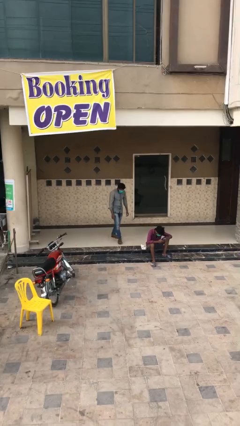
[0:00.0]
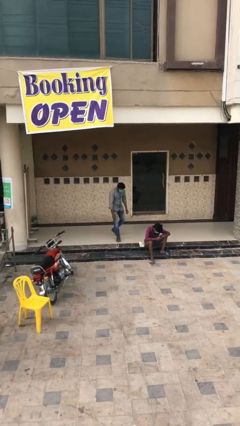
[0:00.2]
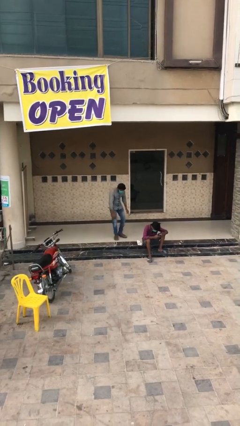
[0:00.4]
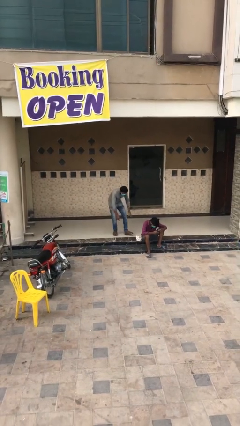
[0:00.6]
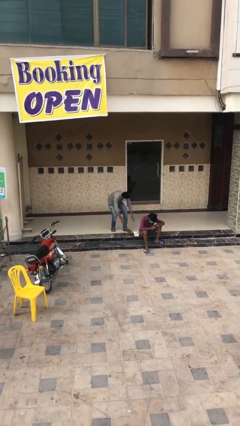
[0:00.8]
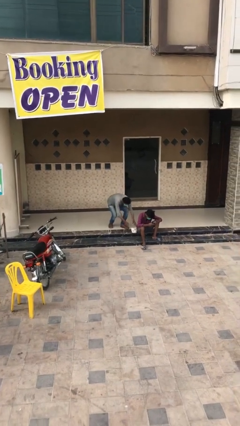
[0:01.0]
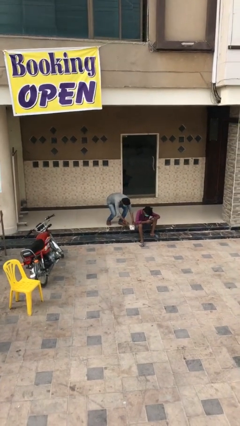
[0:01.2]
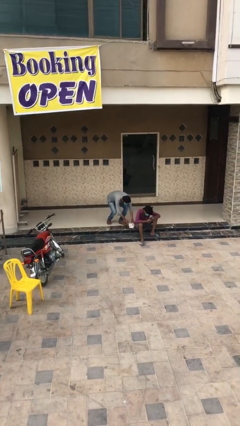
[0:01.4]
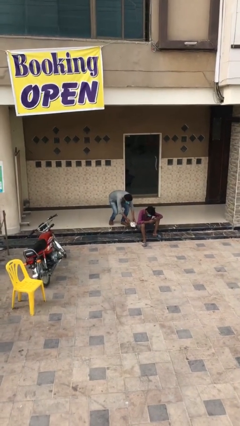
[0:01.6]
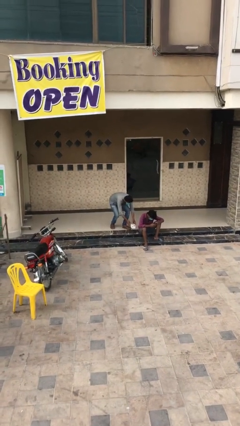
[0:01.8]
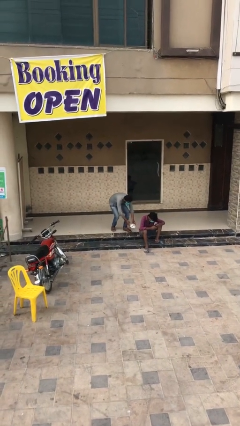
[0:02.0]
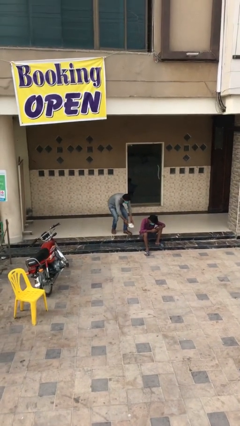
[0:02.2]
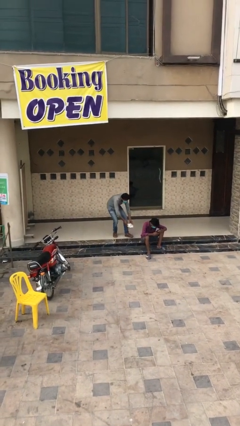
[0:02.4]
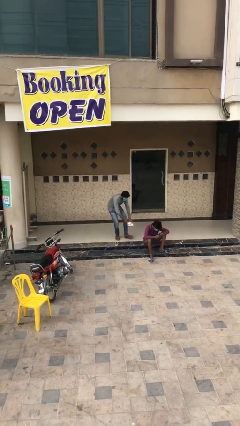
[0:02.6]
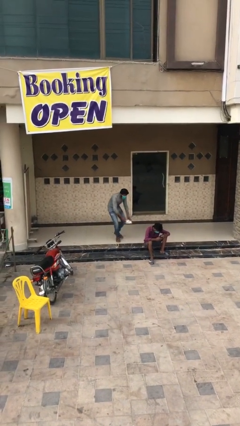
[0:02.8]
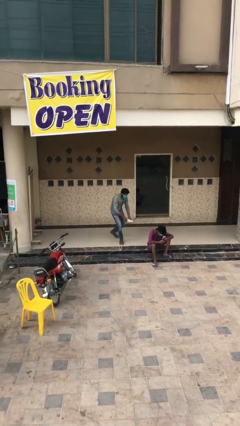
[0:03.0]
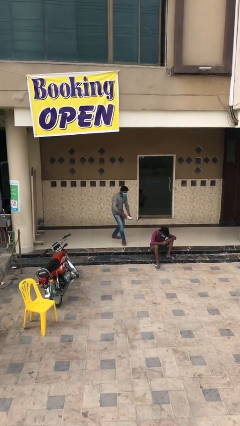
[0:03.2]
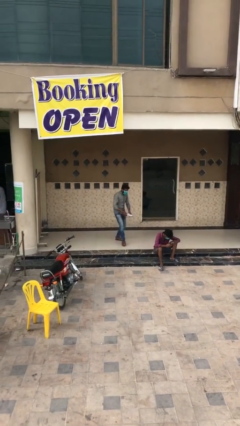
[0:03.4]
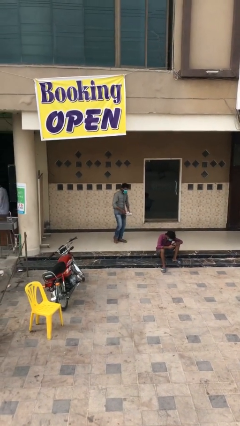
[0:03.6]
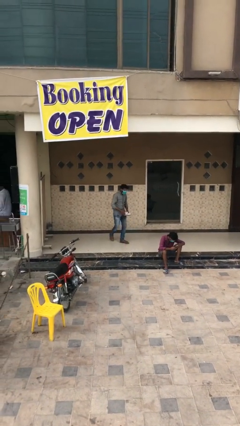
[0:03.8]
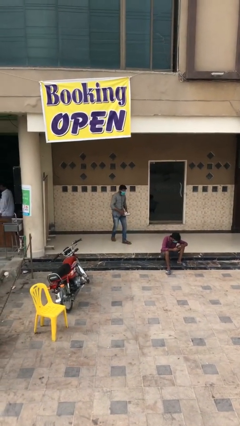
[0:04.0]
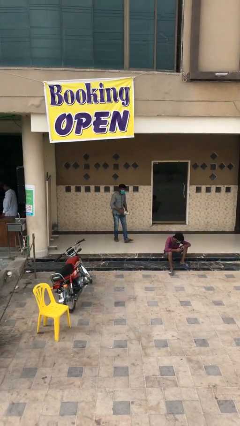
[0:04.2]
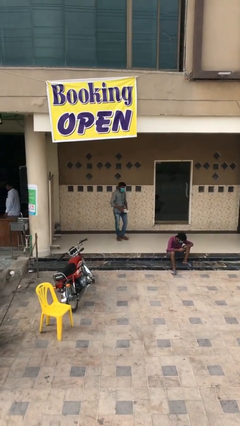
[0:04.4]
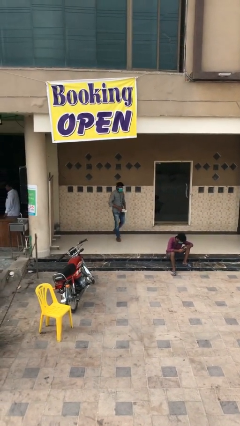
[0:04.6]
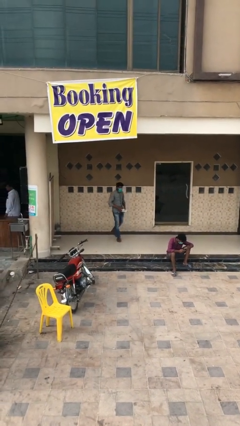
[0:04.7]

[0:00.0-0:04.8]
person steals object from person

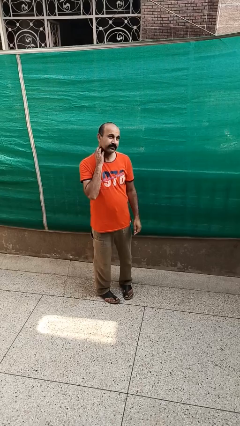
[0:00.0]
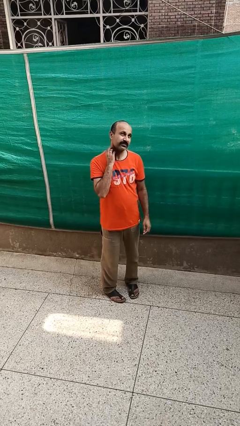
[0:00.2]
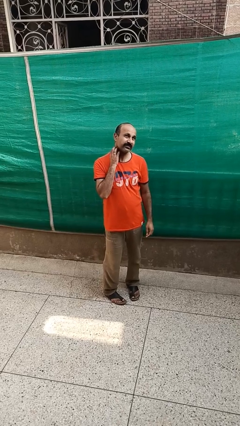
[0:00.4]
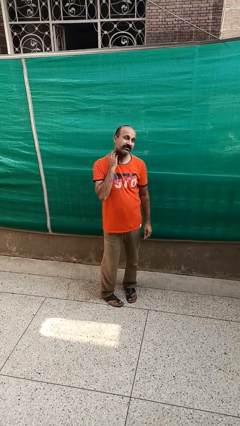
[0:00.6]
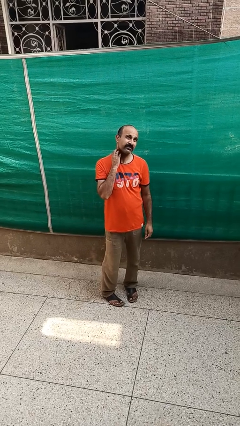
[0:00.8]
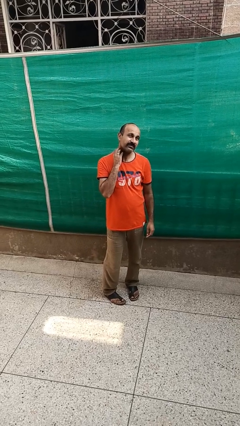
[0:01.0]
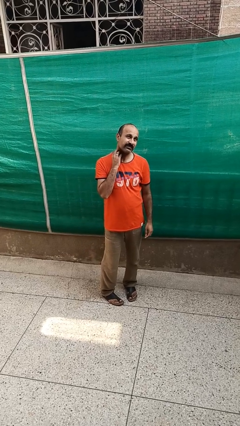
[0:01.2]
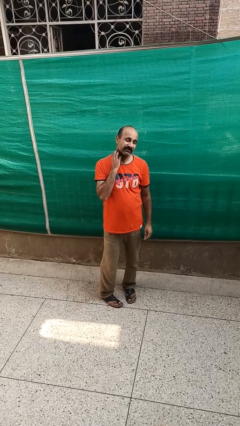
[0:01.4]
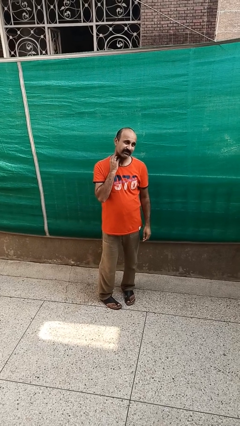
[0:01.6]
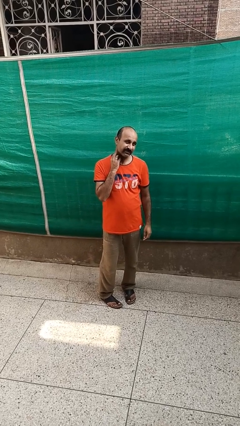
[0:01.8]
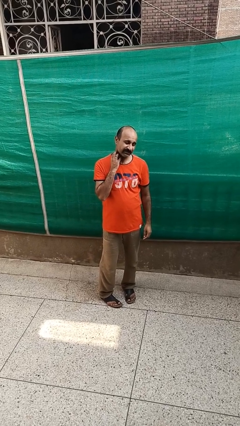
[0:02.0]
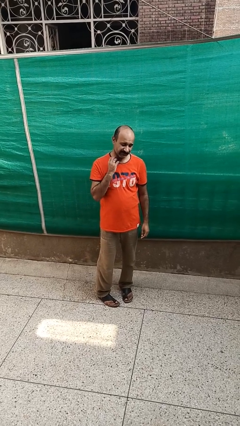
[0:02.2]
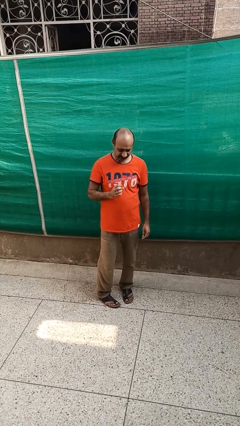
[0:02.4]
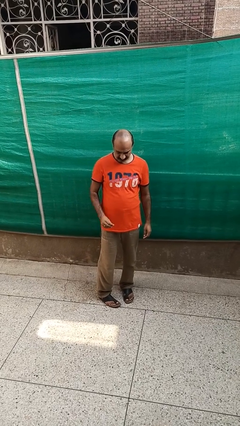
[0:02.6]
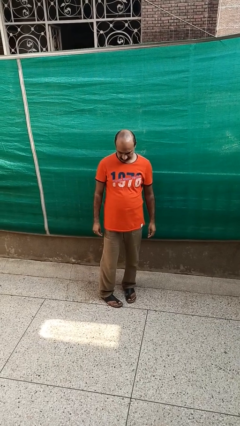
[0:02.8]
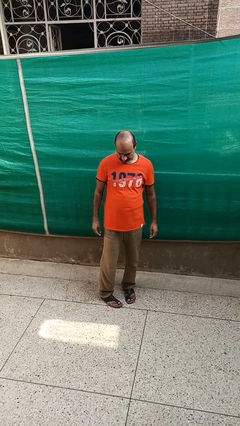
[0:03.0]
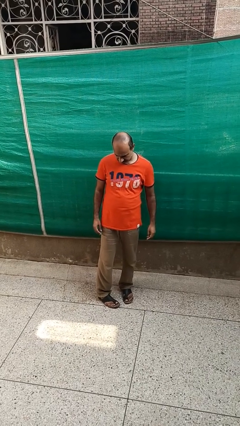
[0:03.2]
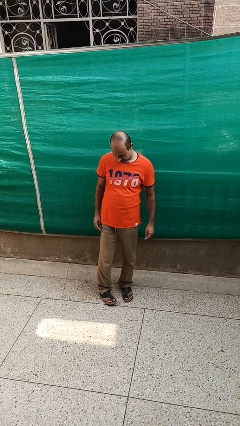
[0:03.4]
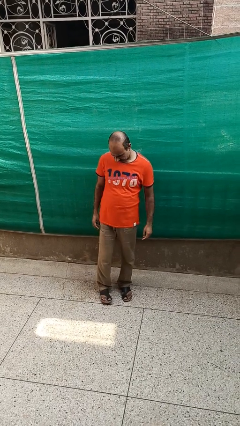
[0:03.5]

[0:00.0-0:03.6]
person scratches face

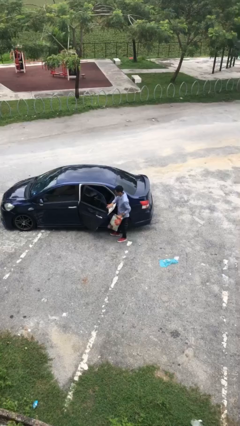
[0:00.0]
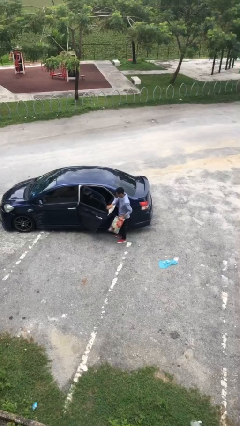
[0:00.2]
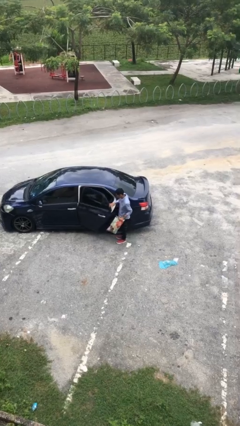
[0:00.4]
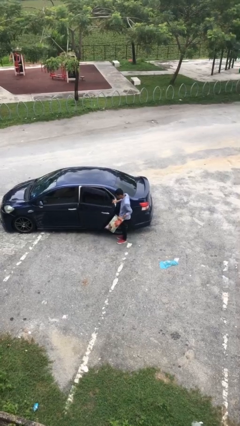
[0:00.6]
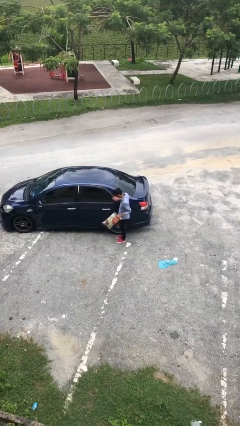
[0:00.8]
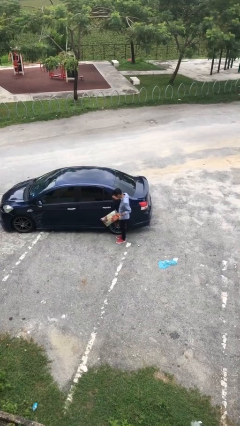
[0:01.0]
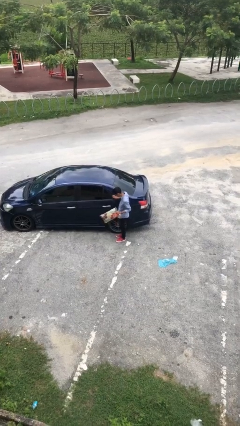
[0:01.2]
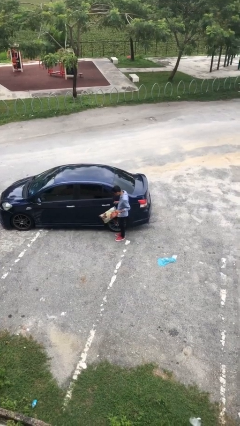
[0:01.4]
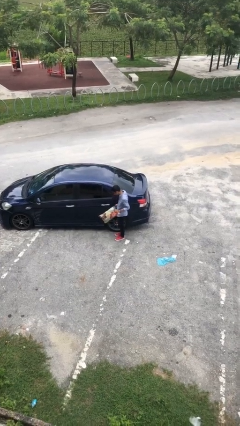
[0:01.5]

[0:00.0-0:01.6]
person closes car door

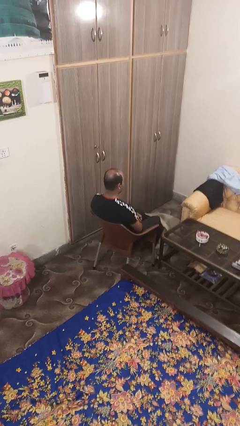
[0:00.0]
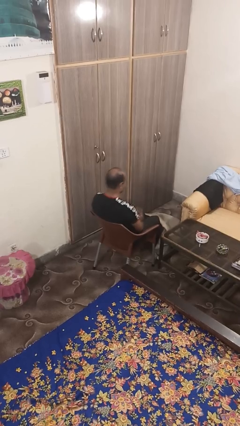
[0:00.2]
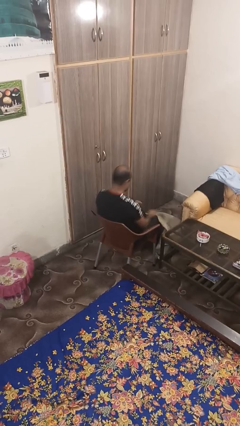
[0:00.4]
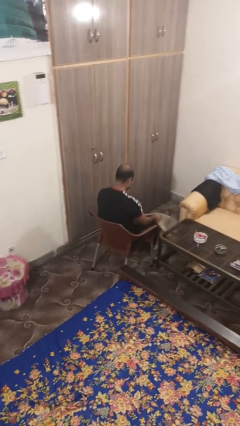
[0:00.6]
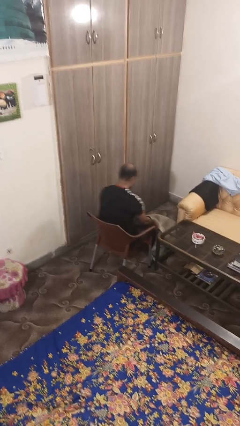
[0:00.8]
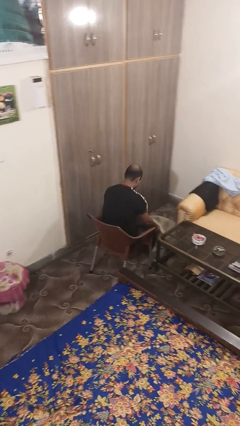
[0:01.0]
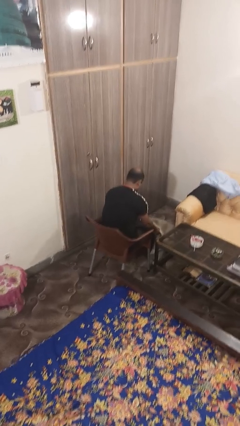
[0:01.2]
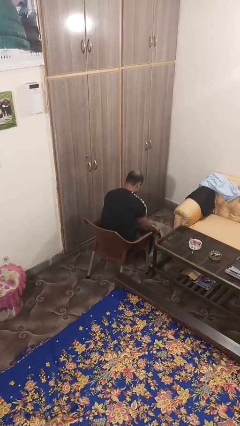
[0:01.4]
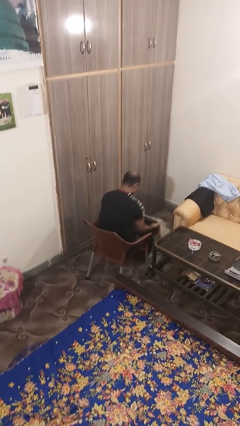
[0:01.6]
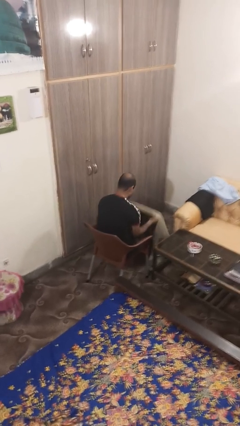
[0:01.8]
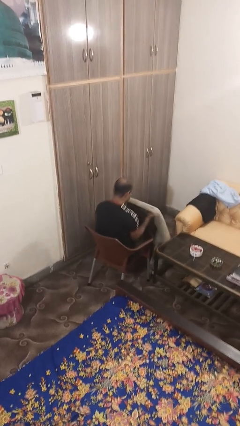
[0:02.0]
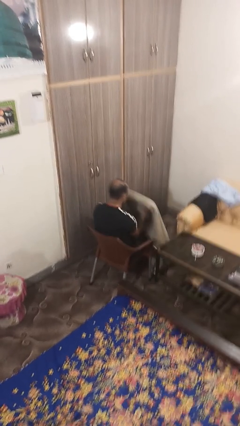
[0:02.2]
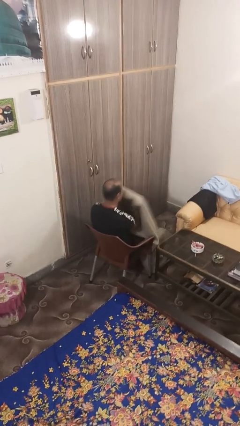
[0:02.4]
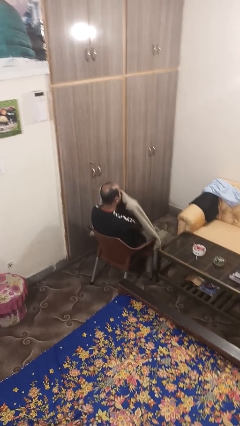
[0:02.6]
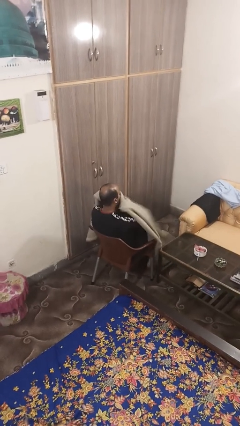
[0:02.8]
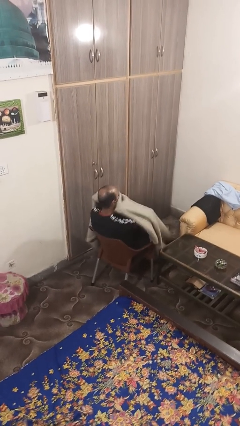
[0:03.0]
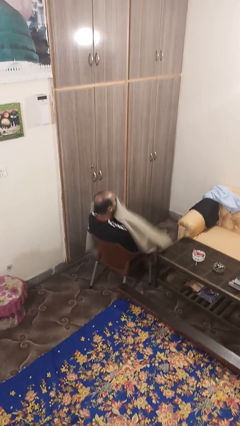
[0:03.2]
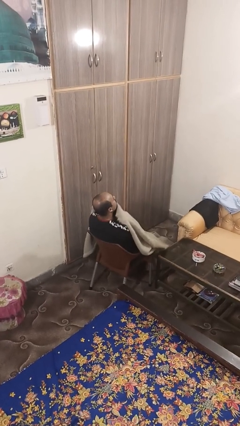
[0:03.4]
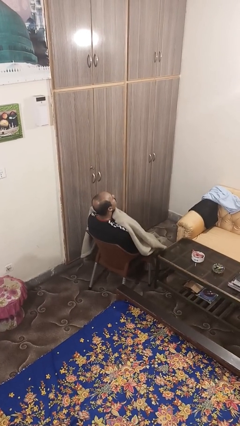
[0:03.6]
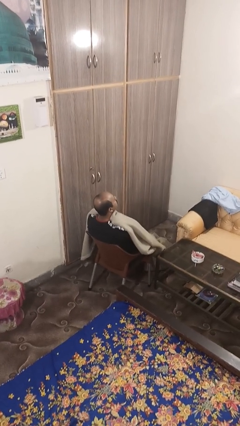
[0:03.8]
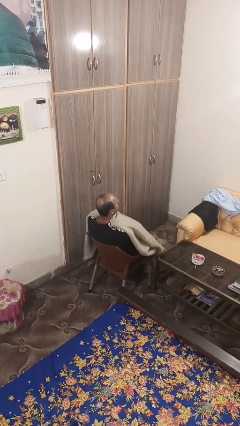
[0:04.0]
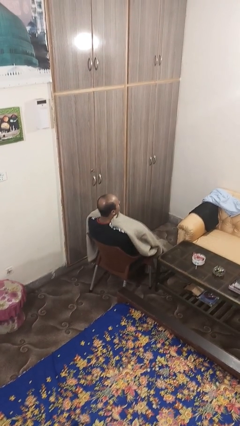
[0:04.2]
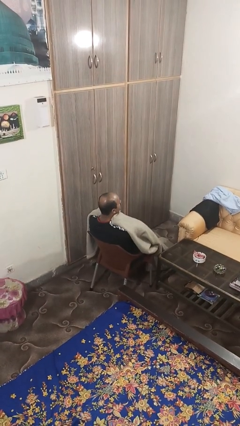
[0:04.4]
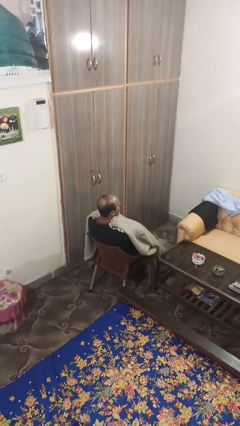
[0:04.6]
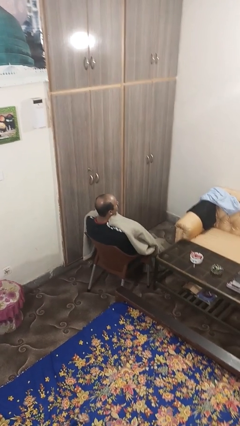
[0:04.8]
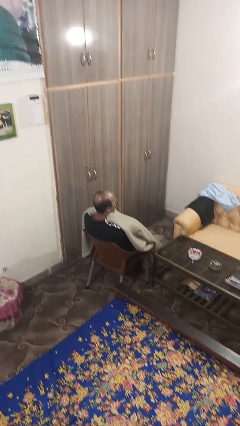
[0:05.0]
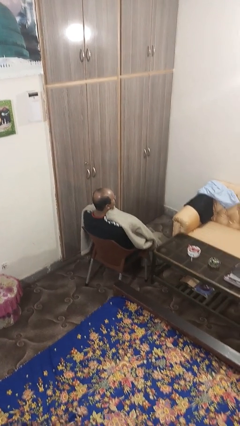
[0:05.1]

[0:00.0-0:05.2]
person covers with blanket

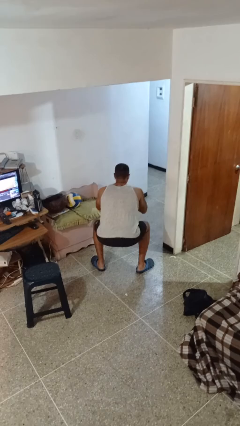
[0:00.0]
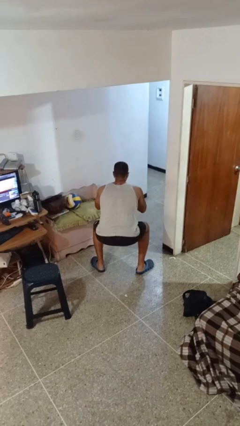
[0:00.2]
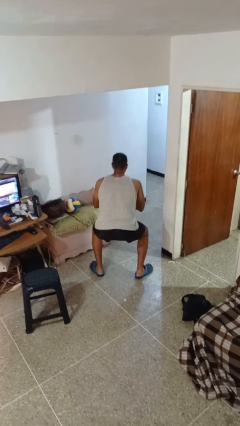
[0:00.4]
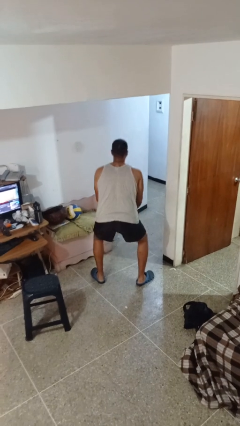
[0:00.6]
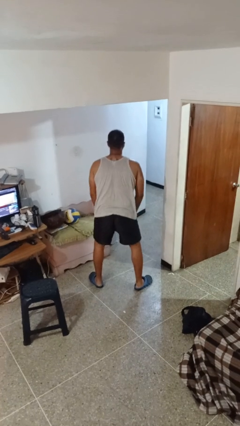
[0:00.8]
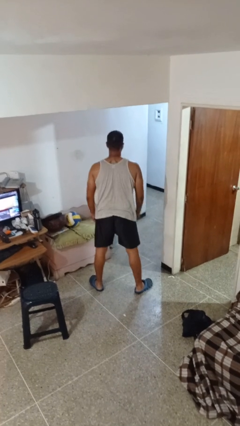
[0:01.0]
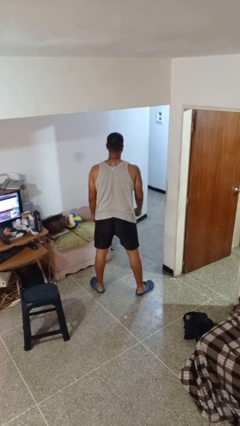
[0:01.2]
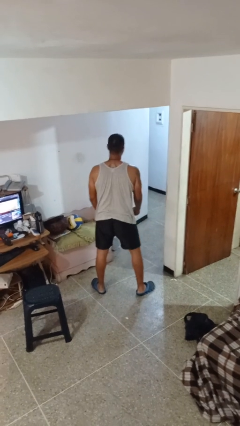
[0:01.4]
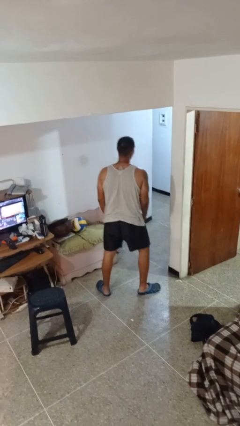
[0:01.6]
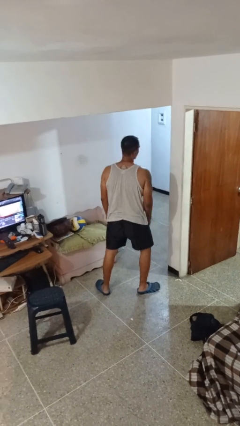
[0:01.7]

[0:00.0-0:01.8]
person stands up

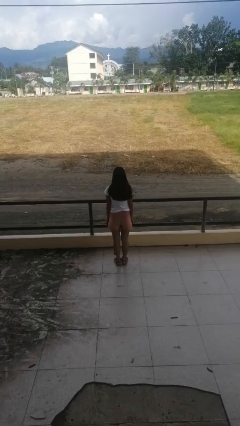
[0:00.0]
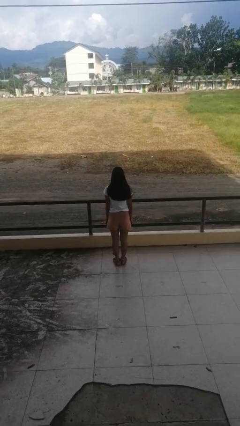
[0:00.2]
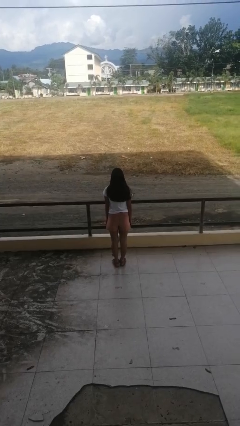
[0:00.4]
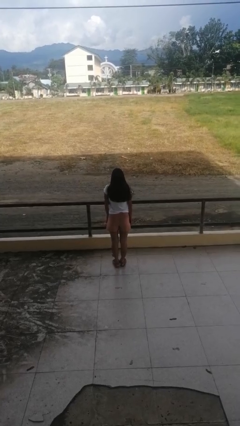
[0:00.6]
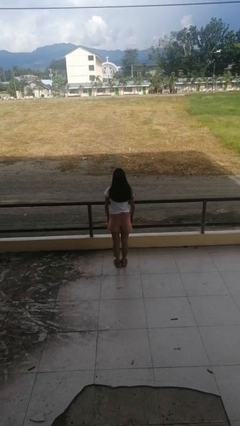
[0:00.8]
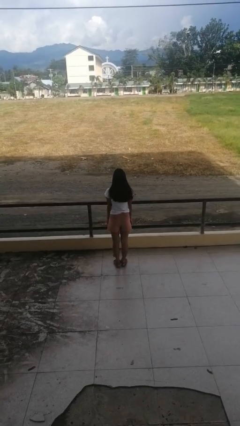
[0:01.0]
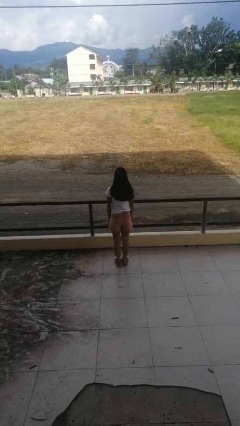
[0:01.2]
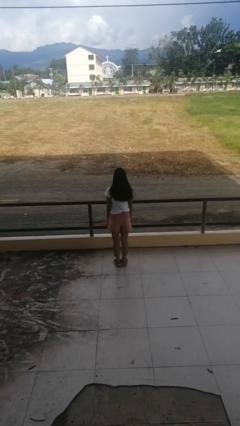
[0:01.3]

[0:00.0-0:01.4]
person shrugs
